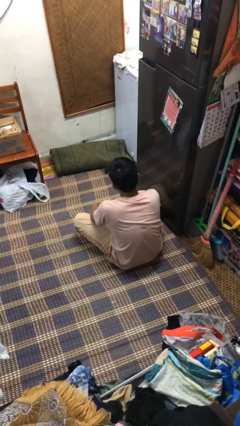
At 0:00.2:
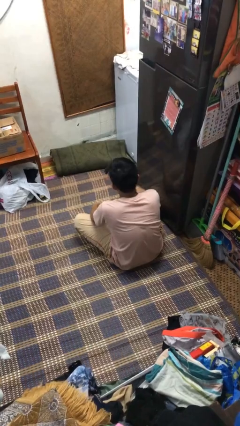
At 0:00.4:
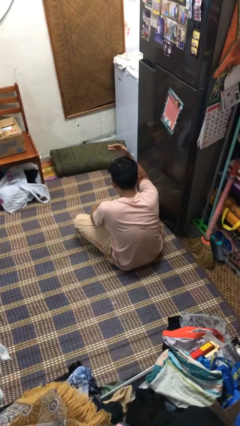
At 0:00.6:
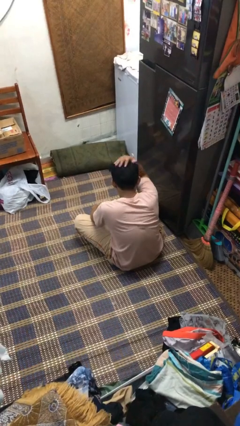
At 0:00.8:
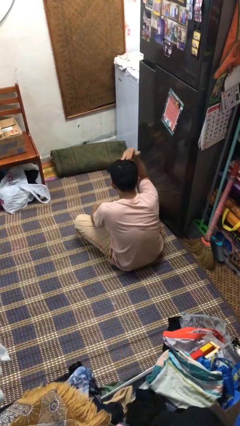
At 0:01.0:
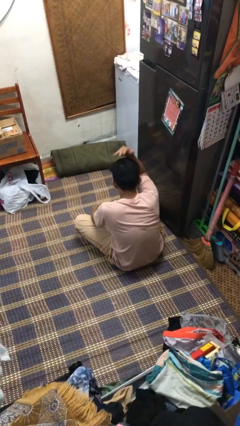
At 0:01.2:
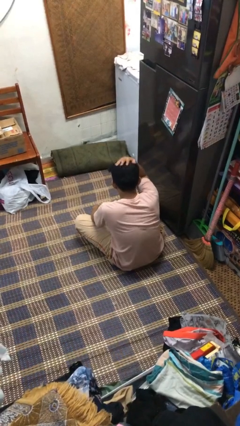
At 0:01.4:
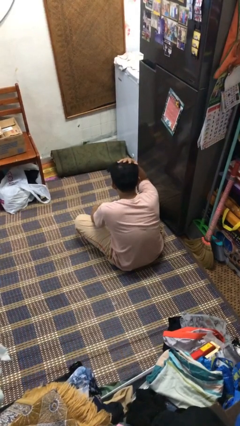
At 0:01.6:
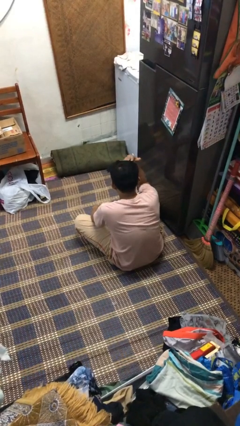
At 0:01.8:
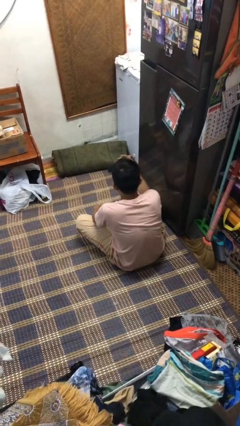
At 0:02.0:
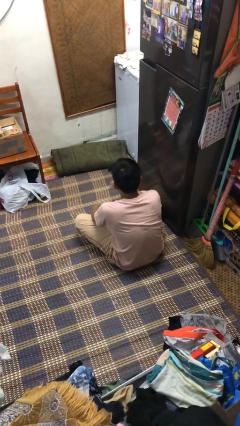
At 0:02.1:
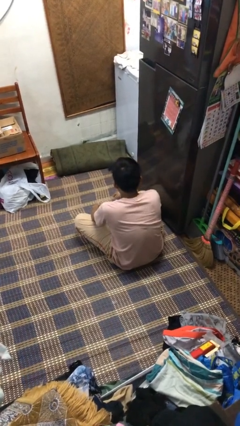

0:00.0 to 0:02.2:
person pats head

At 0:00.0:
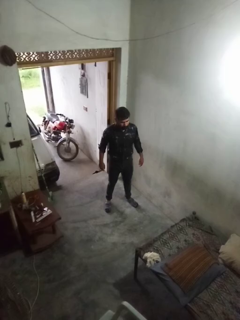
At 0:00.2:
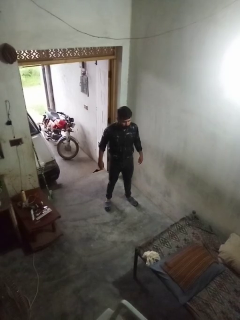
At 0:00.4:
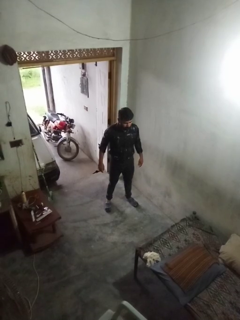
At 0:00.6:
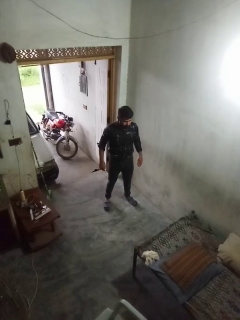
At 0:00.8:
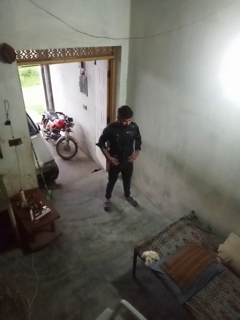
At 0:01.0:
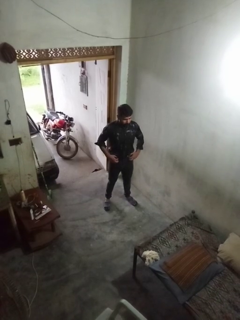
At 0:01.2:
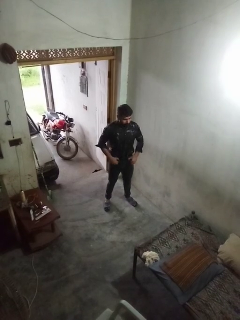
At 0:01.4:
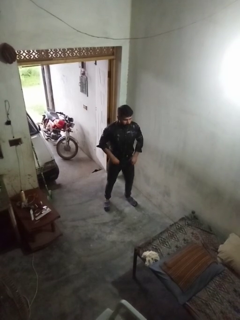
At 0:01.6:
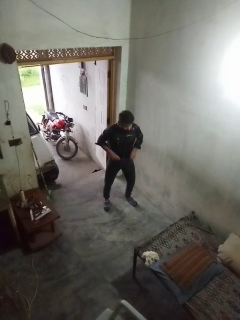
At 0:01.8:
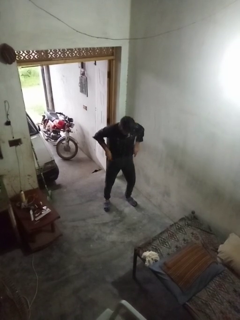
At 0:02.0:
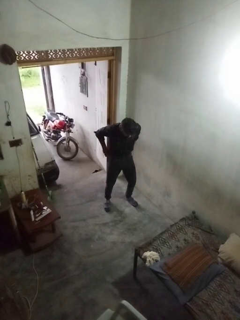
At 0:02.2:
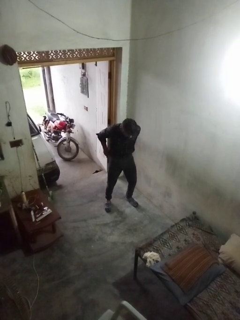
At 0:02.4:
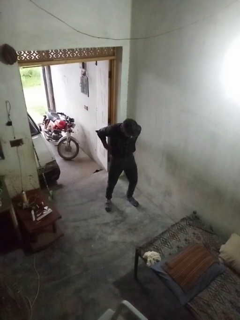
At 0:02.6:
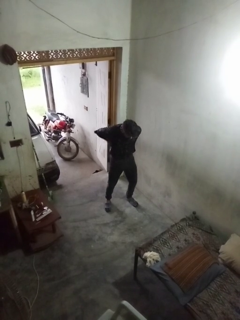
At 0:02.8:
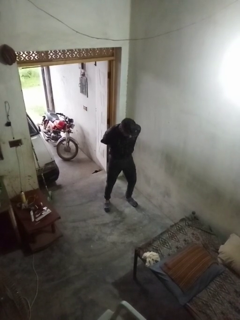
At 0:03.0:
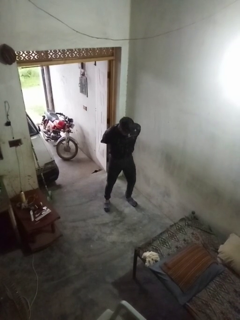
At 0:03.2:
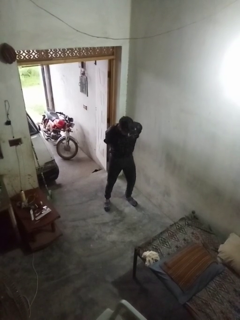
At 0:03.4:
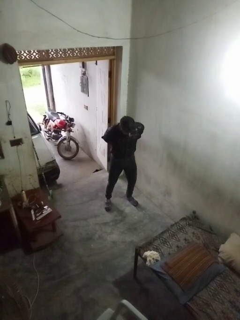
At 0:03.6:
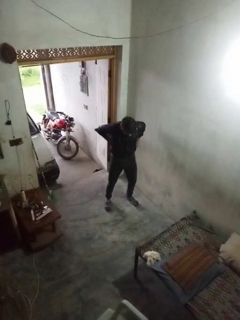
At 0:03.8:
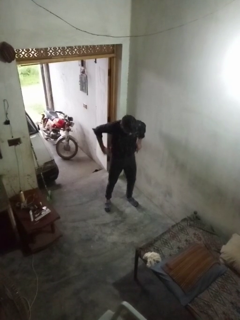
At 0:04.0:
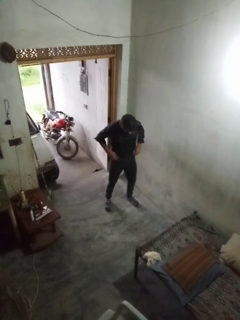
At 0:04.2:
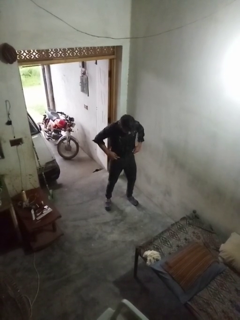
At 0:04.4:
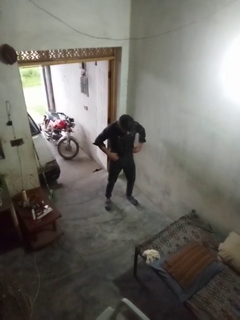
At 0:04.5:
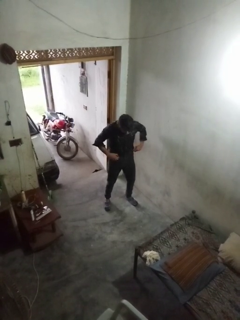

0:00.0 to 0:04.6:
person hikes up pants

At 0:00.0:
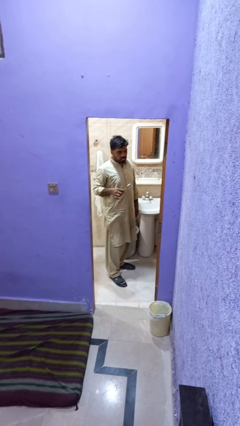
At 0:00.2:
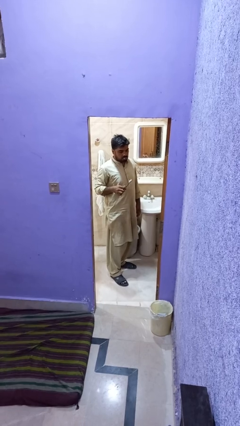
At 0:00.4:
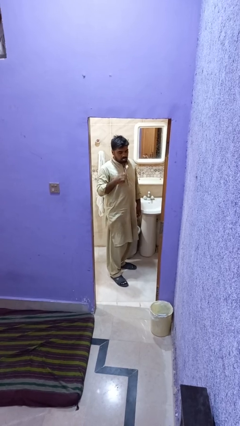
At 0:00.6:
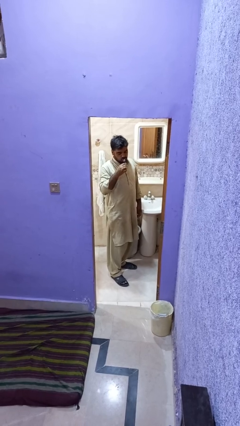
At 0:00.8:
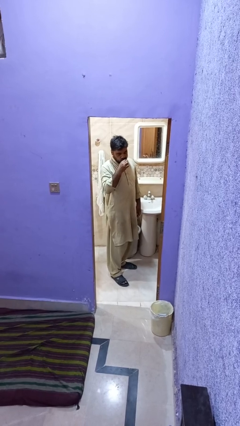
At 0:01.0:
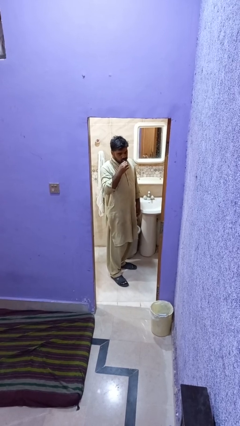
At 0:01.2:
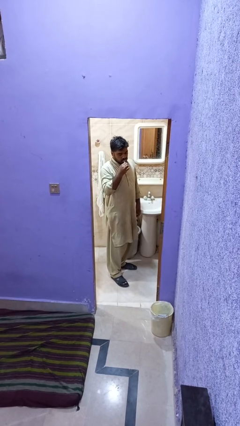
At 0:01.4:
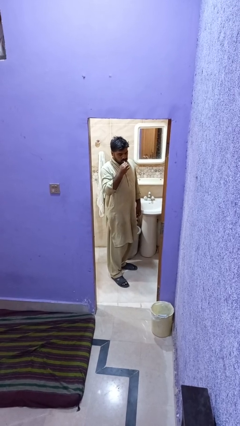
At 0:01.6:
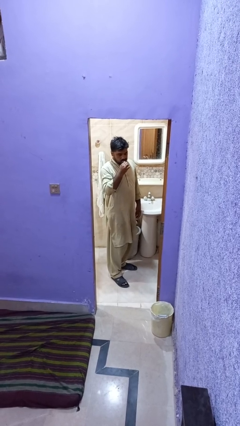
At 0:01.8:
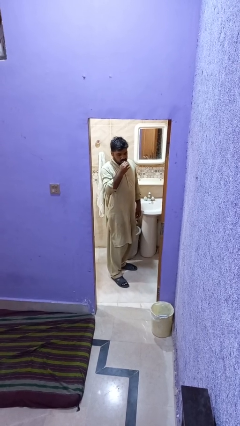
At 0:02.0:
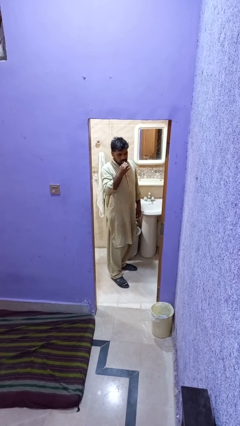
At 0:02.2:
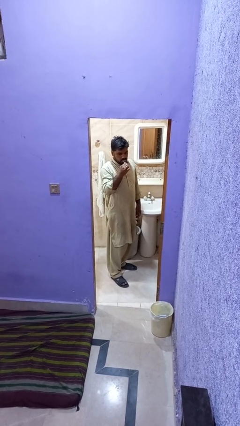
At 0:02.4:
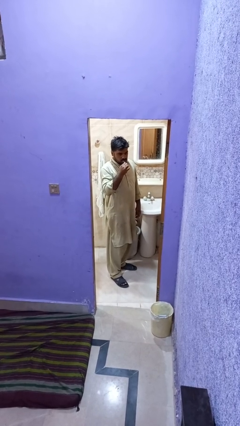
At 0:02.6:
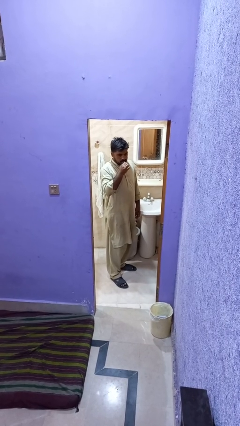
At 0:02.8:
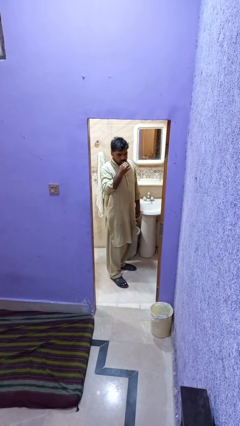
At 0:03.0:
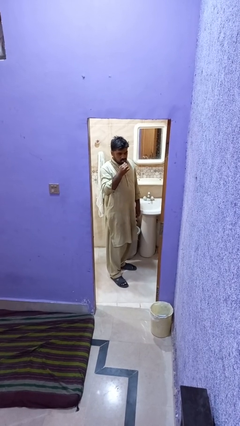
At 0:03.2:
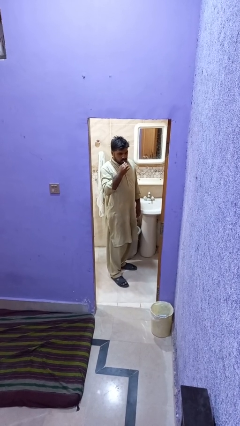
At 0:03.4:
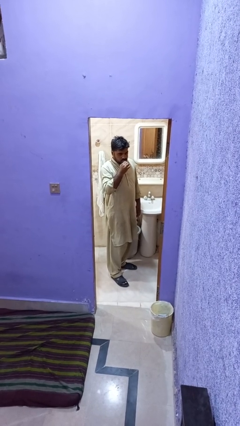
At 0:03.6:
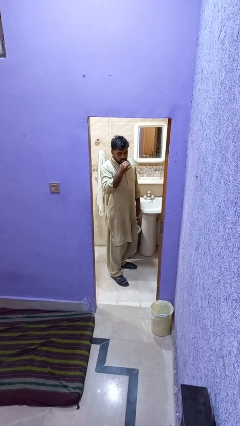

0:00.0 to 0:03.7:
person brushes teeth

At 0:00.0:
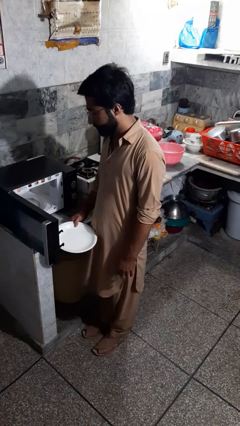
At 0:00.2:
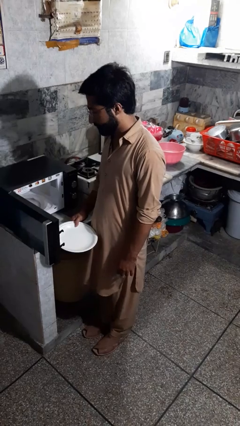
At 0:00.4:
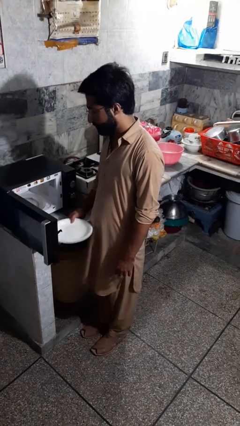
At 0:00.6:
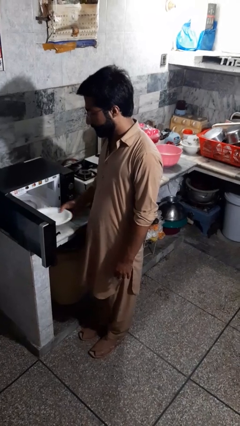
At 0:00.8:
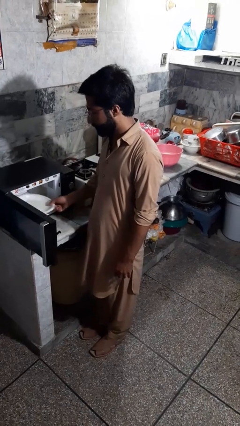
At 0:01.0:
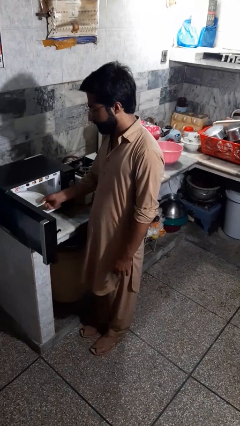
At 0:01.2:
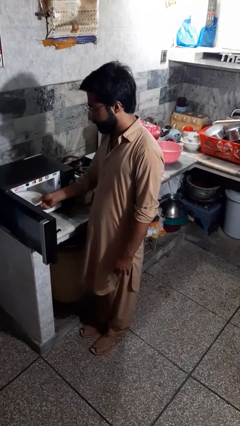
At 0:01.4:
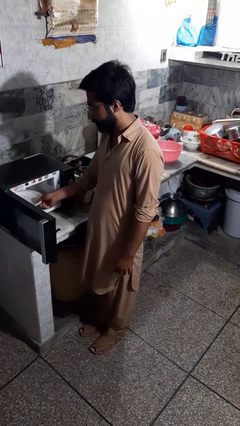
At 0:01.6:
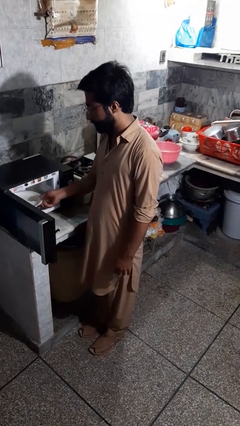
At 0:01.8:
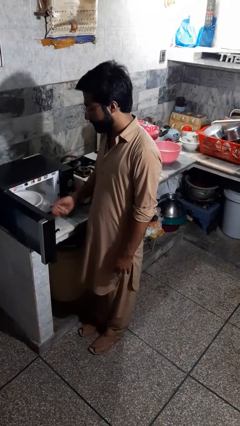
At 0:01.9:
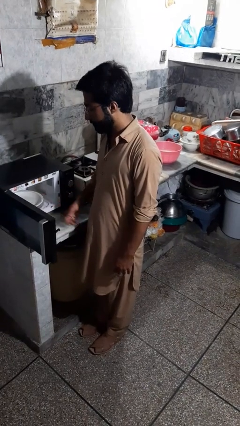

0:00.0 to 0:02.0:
person puts object into oven

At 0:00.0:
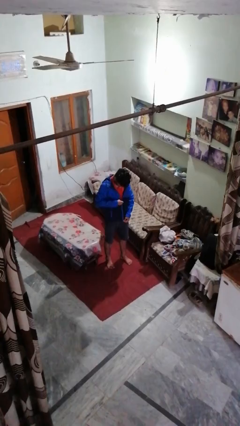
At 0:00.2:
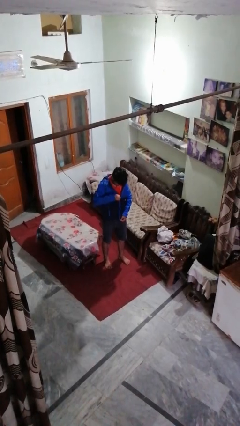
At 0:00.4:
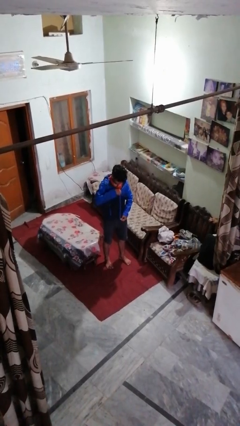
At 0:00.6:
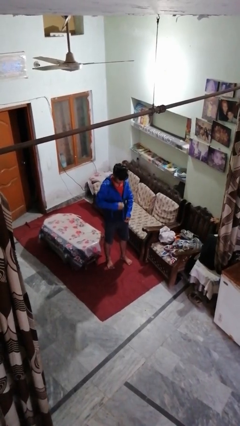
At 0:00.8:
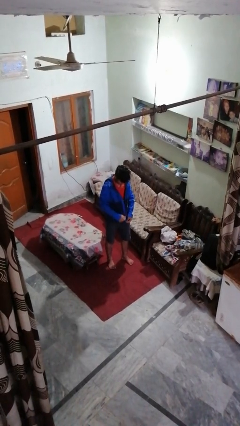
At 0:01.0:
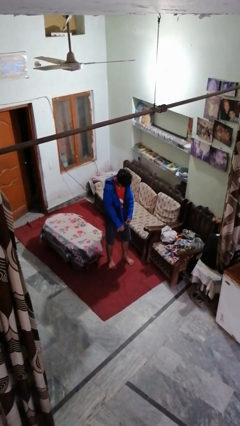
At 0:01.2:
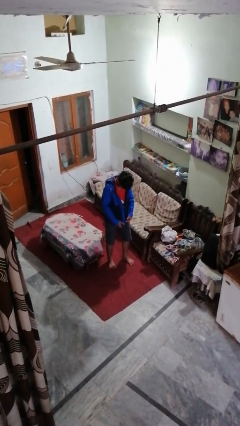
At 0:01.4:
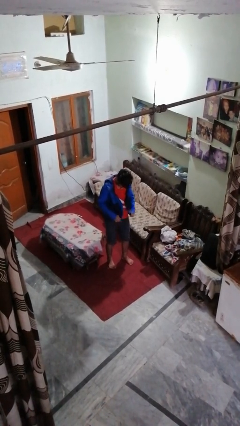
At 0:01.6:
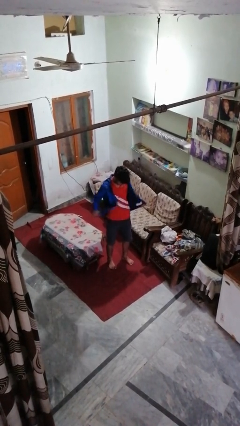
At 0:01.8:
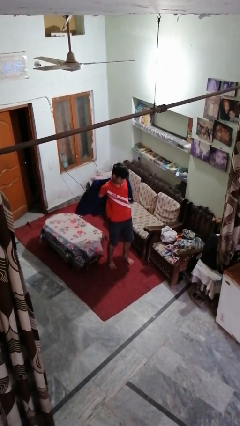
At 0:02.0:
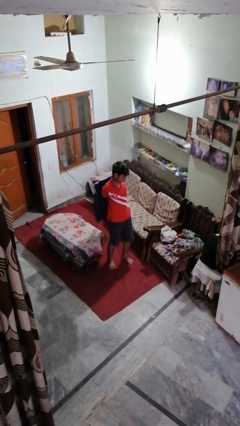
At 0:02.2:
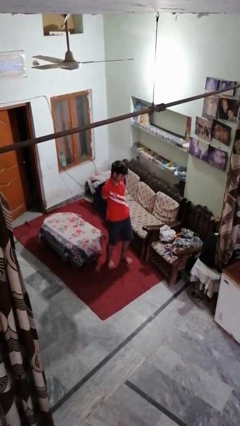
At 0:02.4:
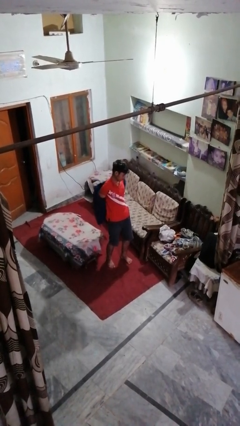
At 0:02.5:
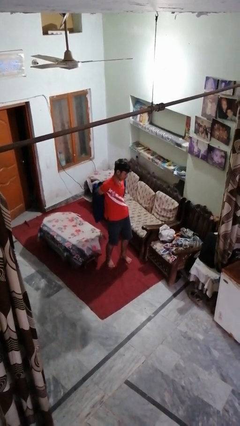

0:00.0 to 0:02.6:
person unzips jacket

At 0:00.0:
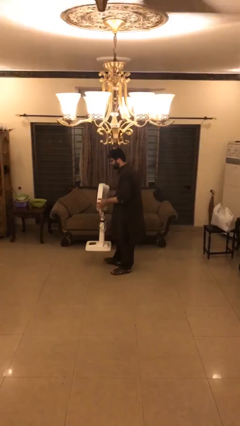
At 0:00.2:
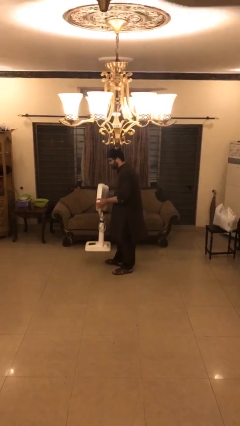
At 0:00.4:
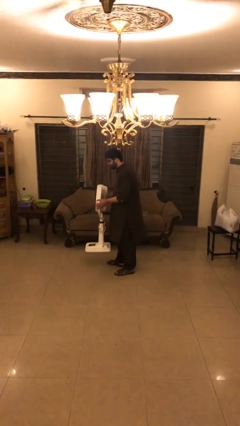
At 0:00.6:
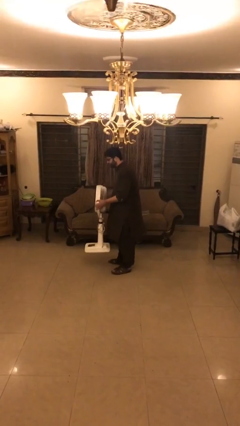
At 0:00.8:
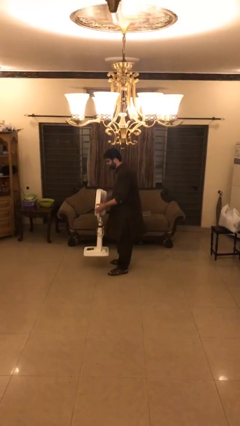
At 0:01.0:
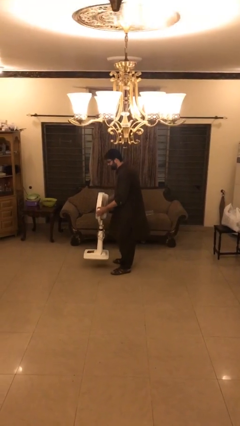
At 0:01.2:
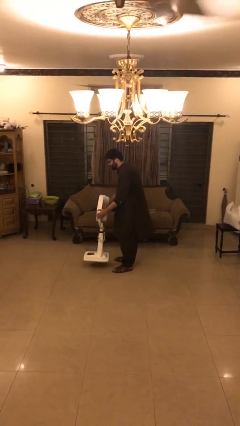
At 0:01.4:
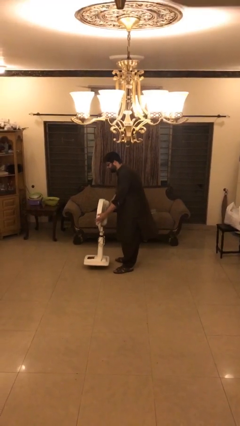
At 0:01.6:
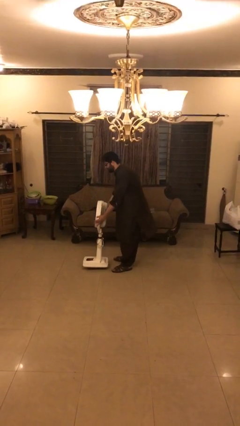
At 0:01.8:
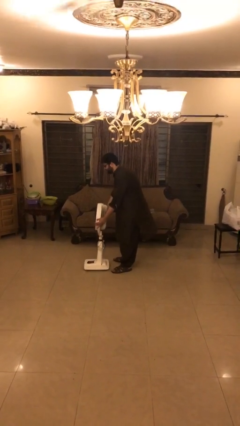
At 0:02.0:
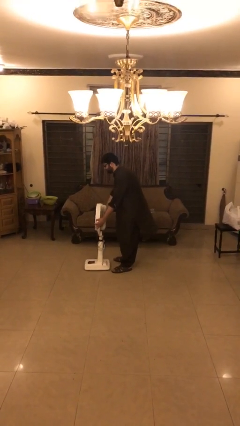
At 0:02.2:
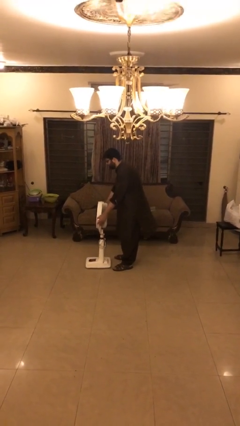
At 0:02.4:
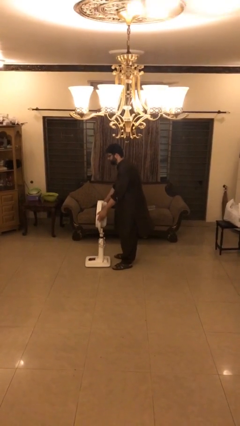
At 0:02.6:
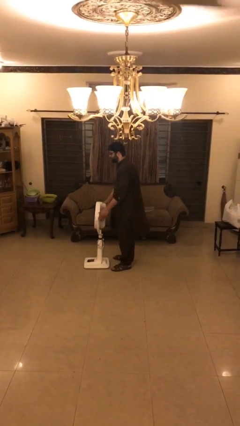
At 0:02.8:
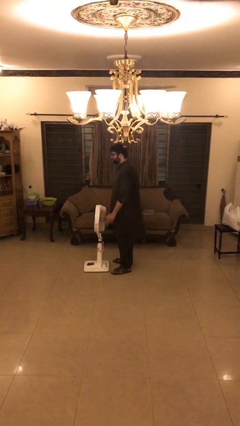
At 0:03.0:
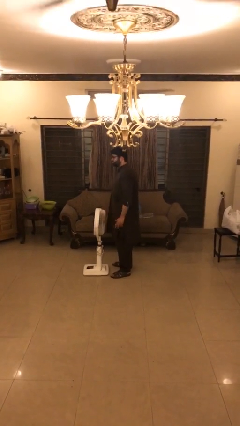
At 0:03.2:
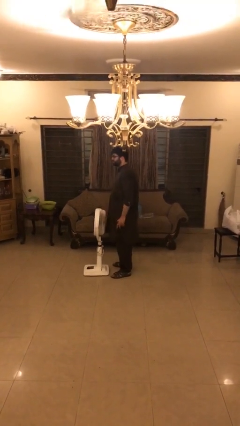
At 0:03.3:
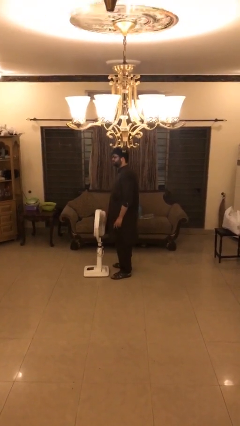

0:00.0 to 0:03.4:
person puts down object on floor

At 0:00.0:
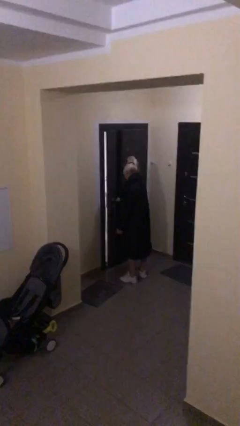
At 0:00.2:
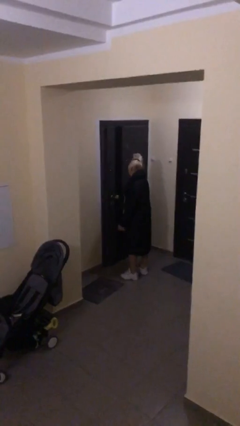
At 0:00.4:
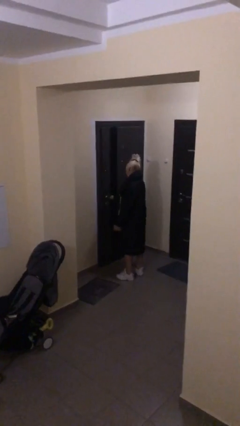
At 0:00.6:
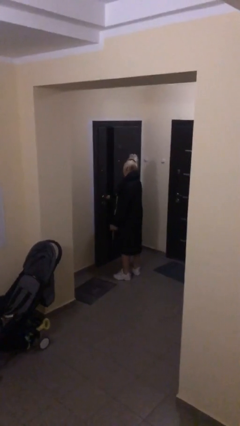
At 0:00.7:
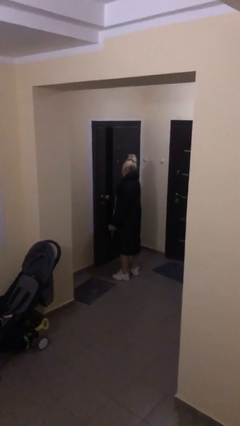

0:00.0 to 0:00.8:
person closes facility door
